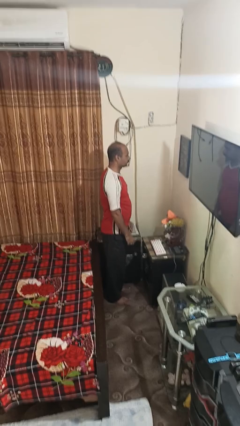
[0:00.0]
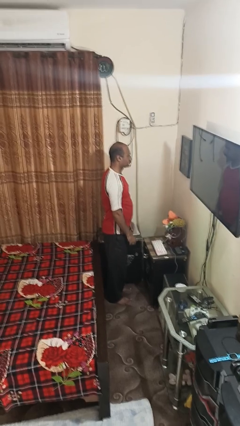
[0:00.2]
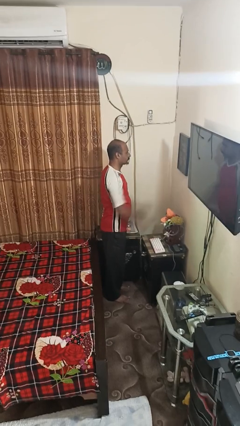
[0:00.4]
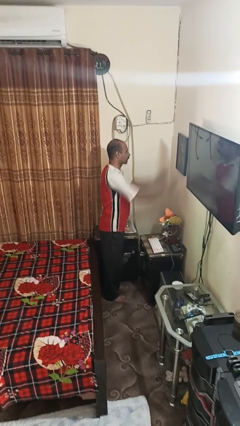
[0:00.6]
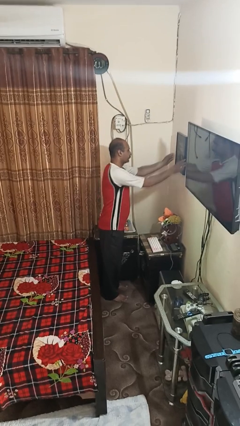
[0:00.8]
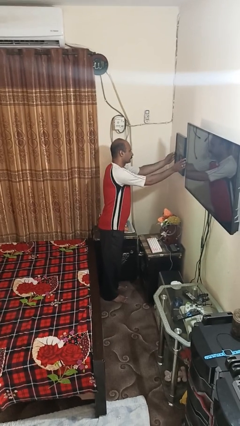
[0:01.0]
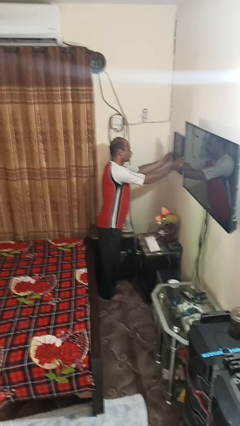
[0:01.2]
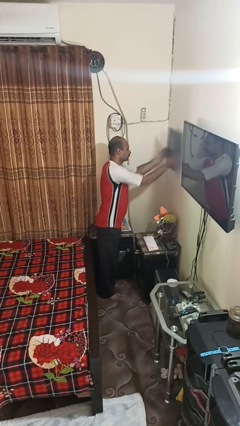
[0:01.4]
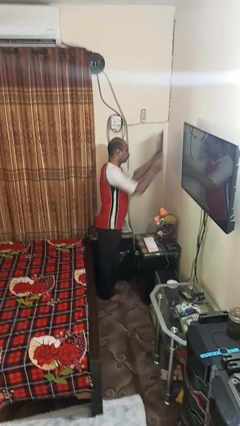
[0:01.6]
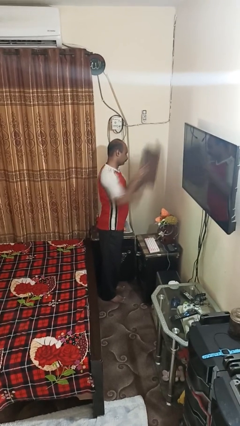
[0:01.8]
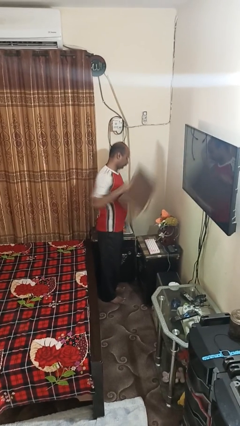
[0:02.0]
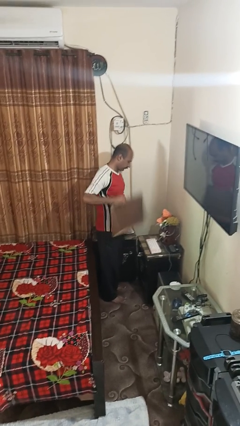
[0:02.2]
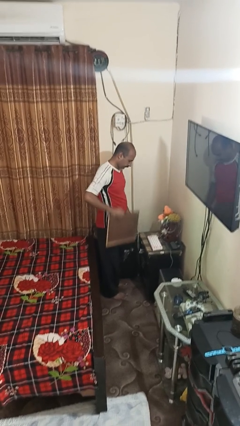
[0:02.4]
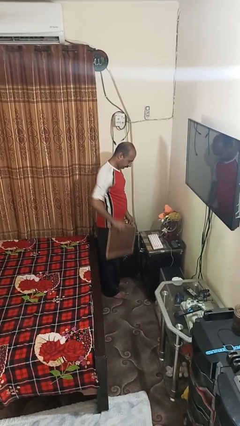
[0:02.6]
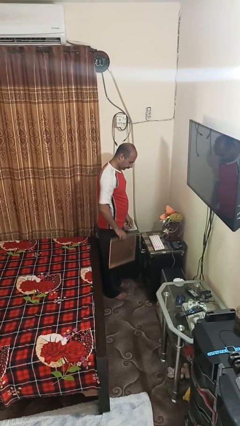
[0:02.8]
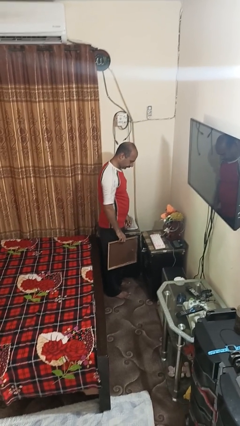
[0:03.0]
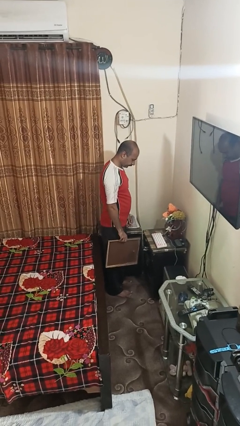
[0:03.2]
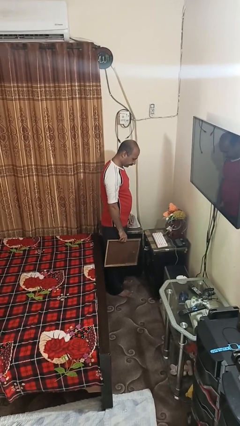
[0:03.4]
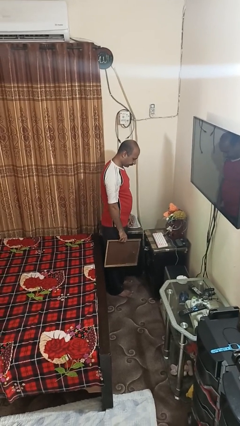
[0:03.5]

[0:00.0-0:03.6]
person takes down picture frame

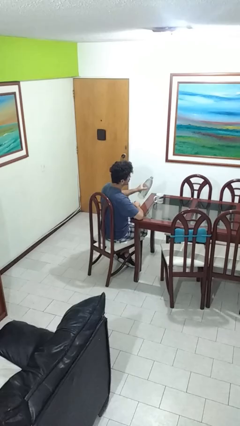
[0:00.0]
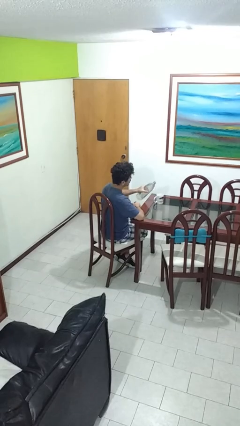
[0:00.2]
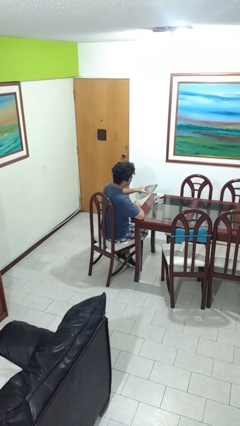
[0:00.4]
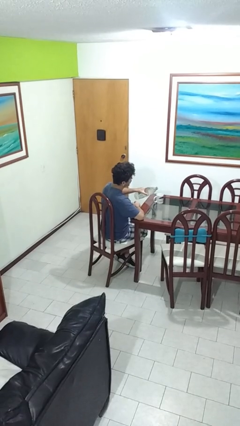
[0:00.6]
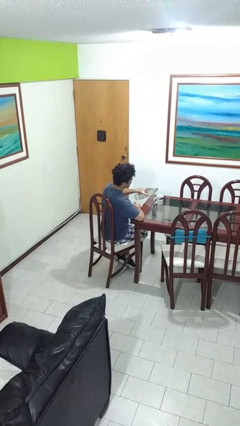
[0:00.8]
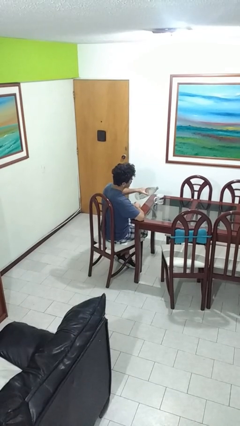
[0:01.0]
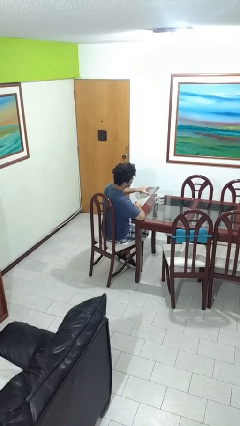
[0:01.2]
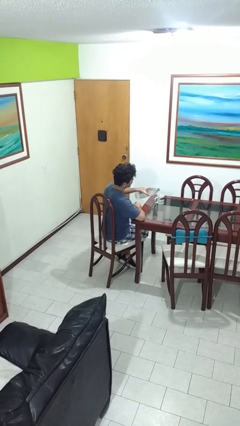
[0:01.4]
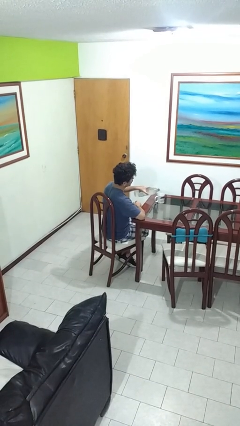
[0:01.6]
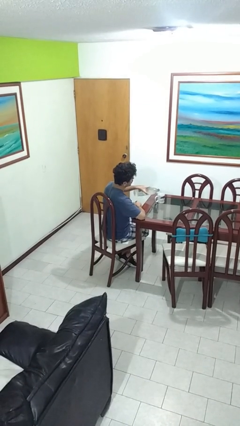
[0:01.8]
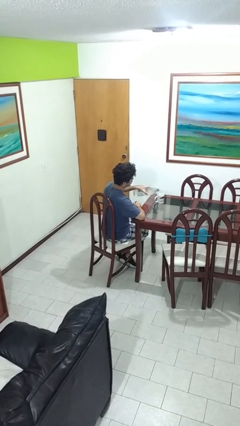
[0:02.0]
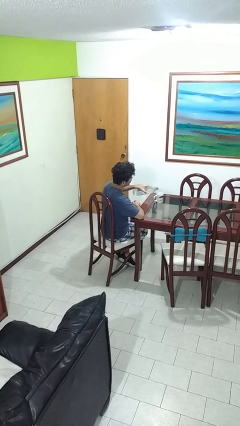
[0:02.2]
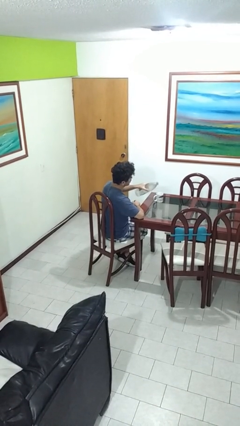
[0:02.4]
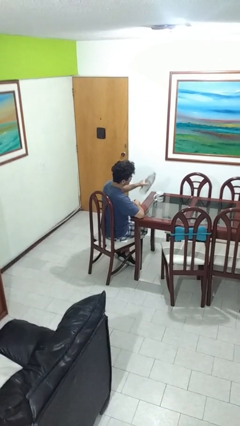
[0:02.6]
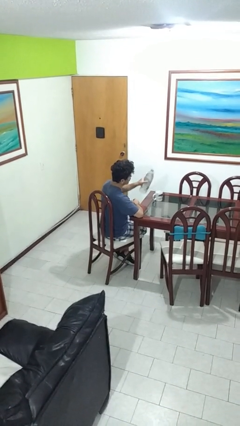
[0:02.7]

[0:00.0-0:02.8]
person pours liquid into cup

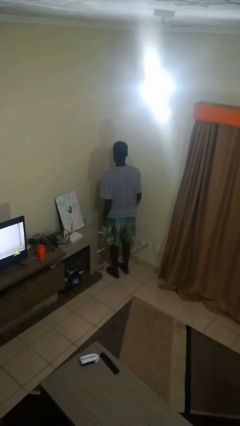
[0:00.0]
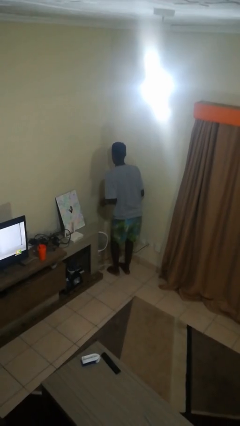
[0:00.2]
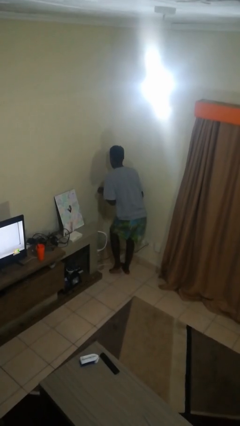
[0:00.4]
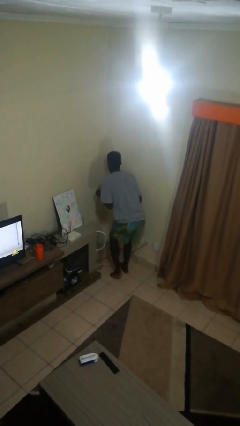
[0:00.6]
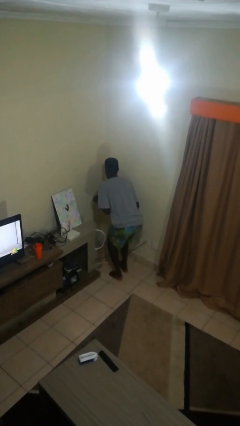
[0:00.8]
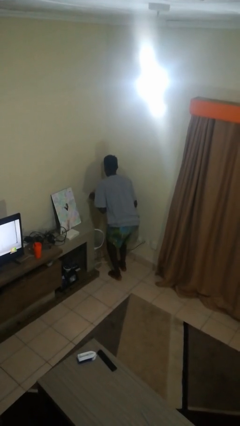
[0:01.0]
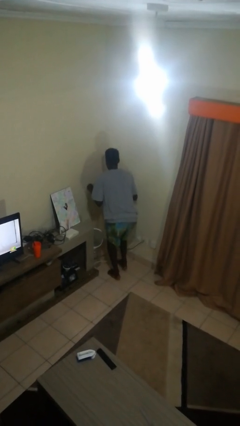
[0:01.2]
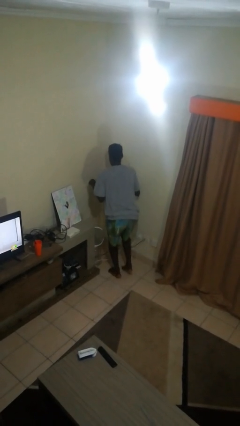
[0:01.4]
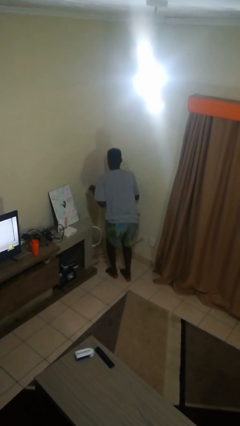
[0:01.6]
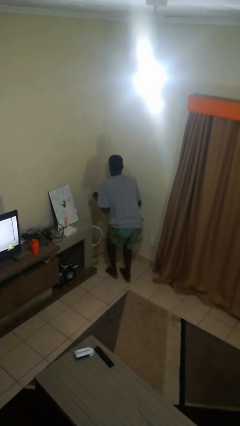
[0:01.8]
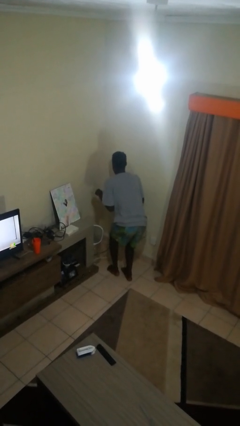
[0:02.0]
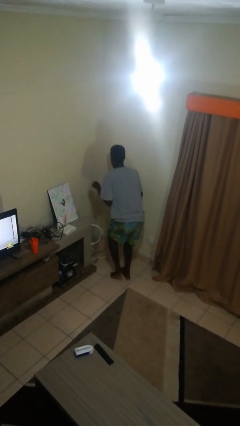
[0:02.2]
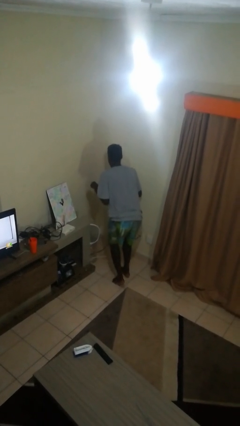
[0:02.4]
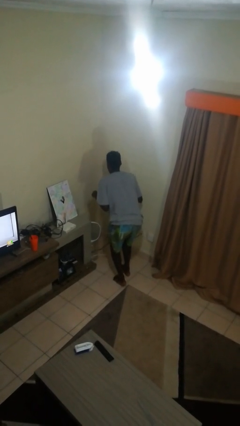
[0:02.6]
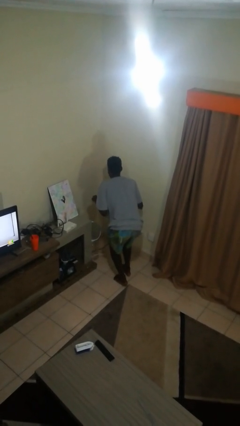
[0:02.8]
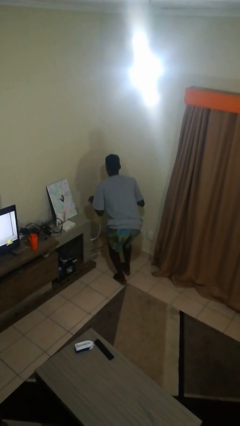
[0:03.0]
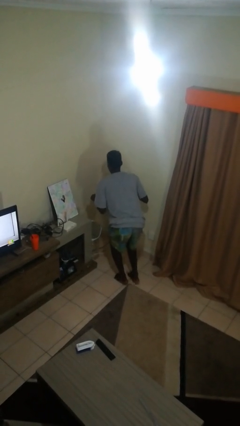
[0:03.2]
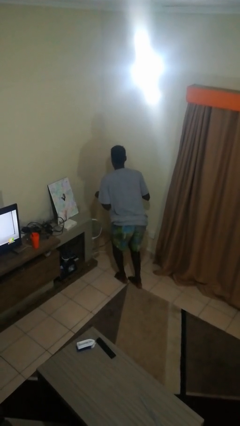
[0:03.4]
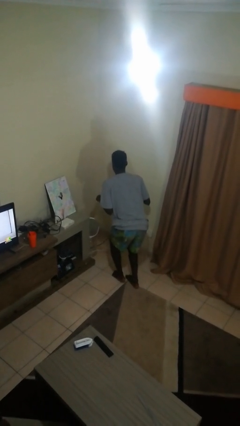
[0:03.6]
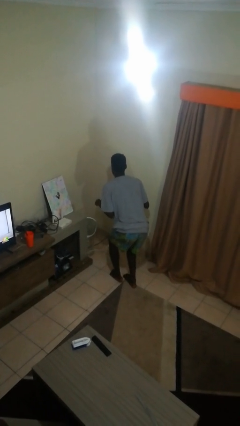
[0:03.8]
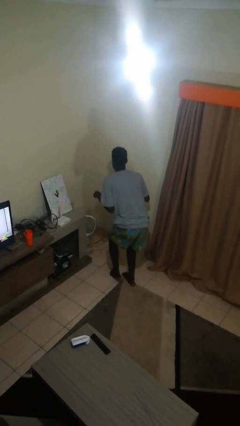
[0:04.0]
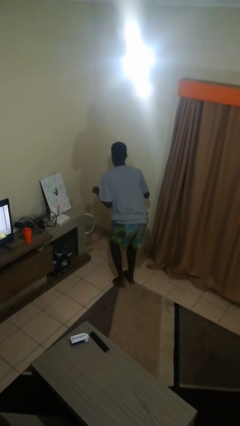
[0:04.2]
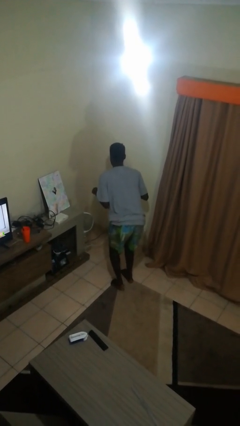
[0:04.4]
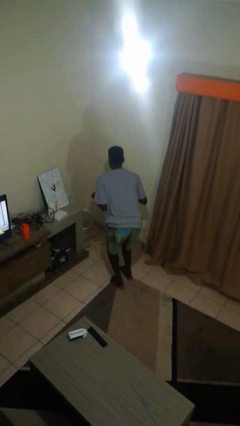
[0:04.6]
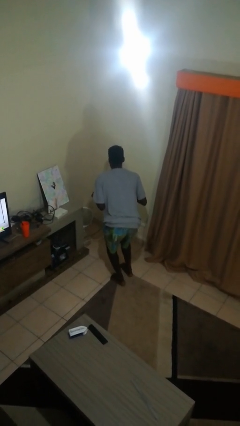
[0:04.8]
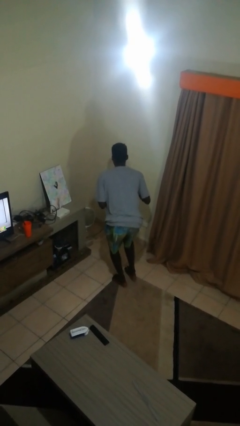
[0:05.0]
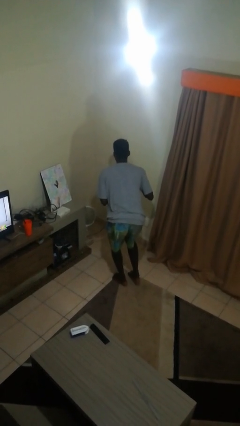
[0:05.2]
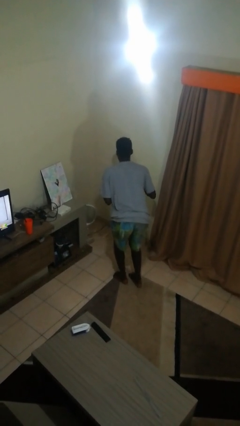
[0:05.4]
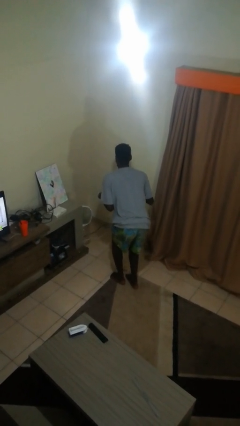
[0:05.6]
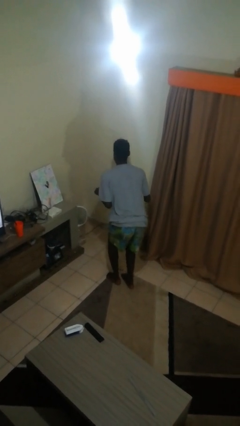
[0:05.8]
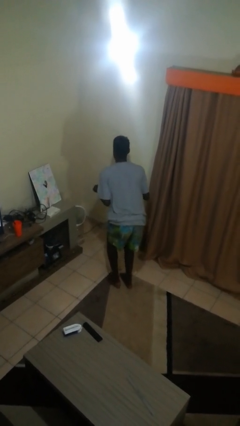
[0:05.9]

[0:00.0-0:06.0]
person walks tiptoe

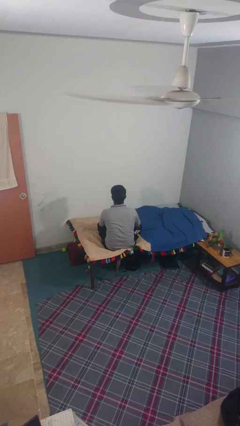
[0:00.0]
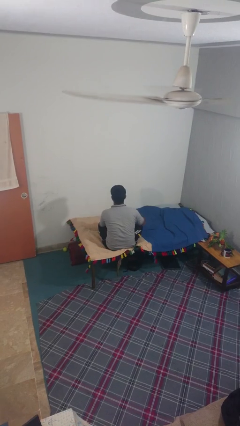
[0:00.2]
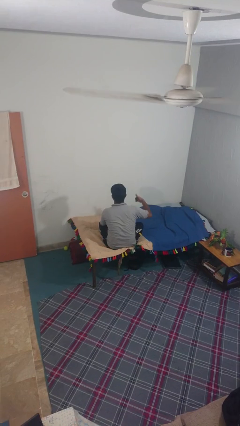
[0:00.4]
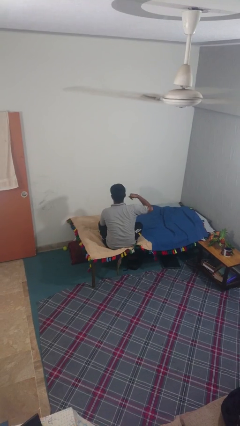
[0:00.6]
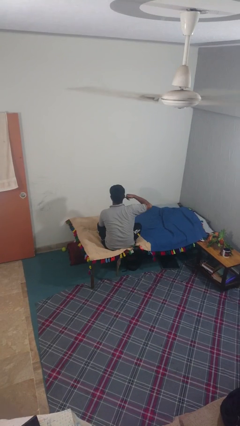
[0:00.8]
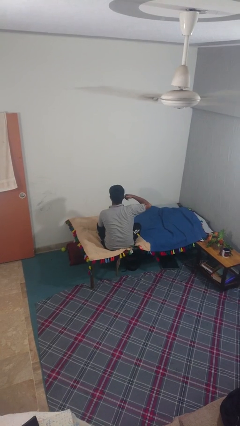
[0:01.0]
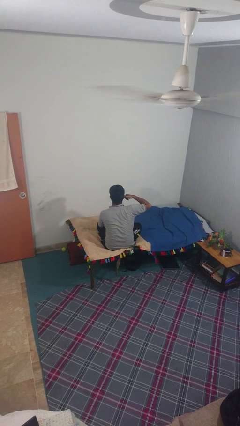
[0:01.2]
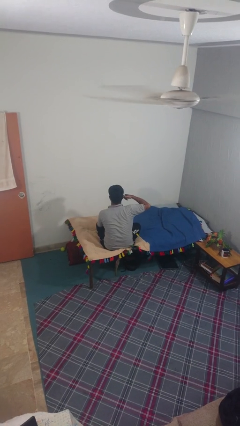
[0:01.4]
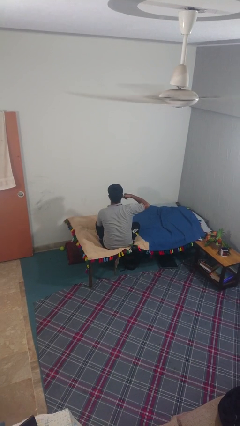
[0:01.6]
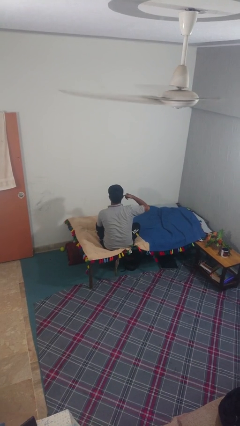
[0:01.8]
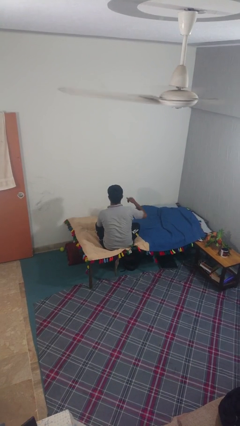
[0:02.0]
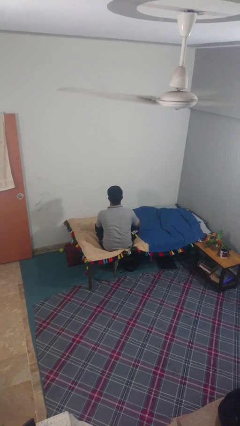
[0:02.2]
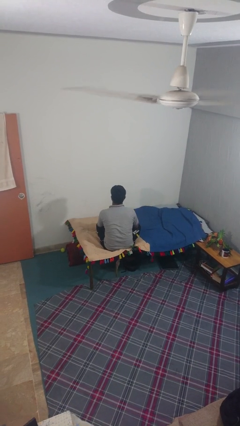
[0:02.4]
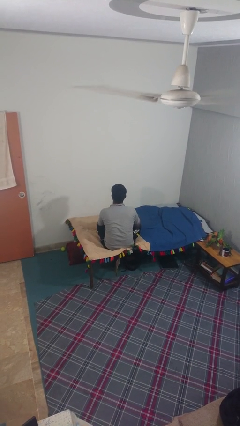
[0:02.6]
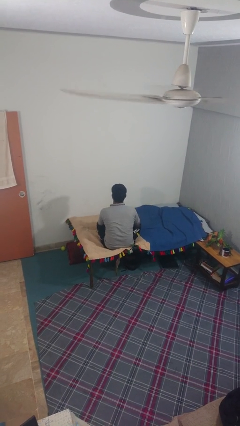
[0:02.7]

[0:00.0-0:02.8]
person gestures call me

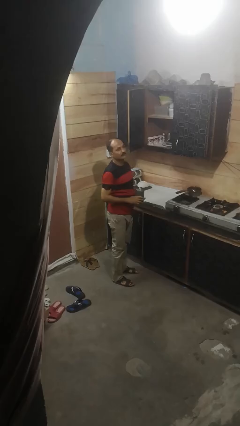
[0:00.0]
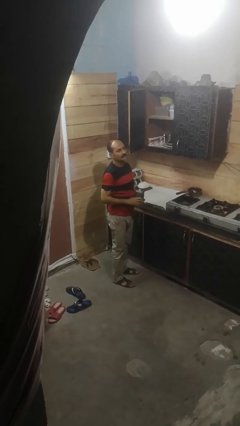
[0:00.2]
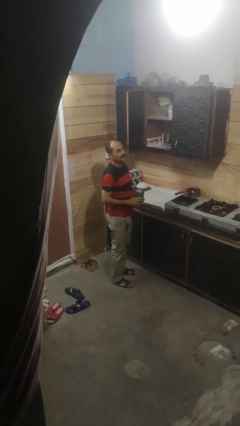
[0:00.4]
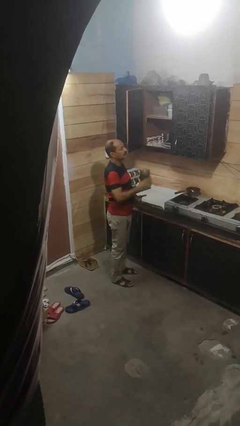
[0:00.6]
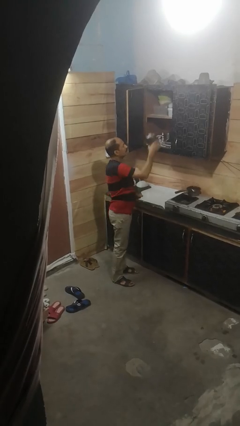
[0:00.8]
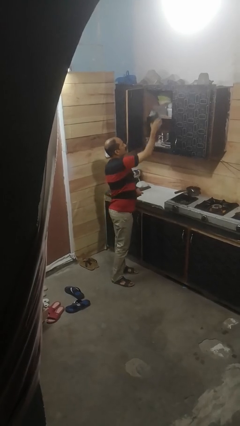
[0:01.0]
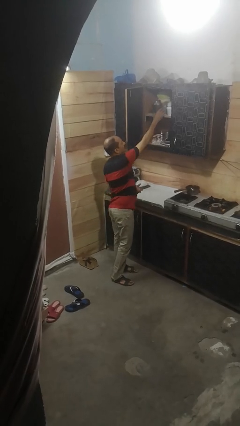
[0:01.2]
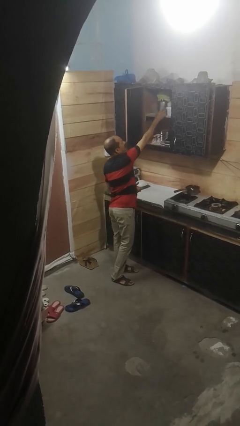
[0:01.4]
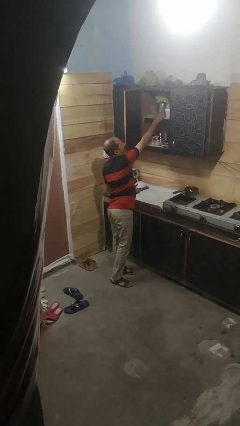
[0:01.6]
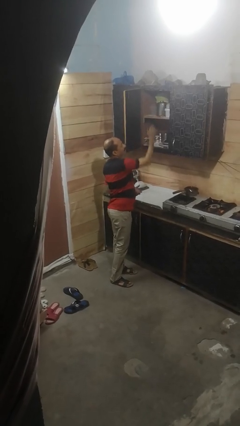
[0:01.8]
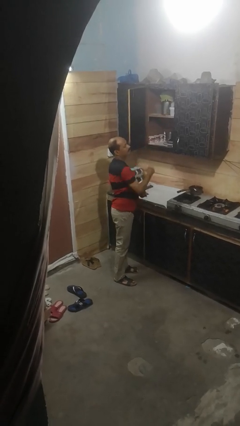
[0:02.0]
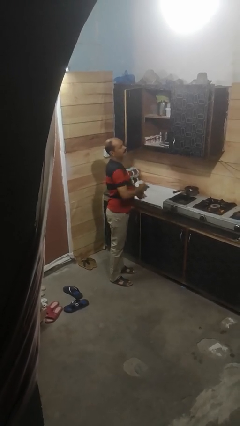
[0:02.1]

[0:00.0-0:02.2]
person puts down object into cabinet
